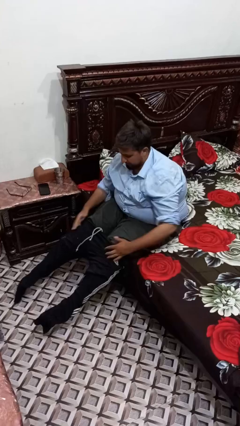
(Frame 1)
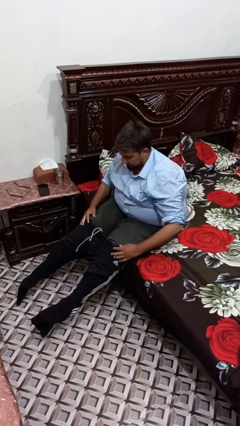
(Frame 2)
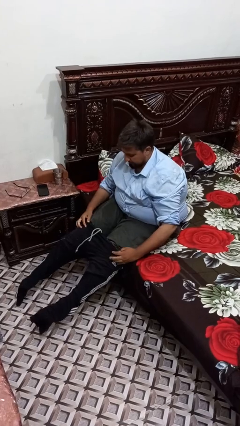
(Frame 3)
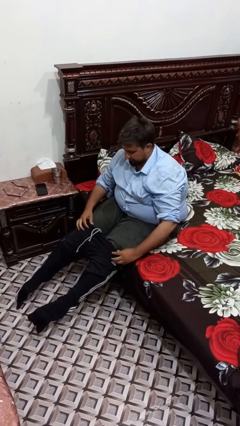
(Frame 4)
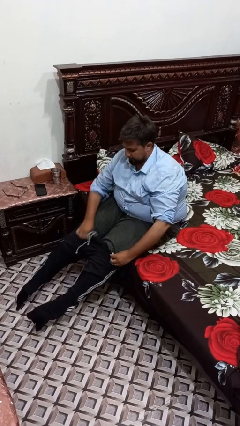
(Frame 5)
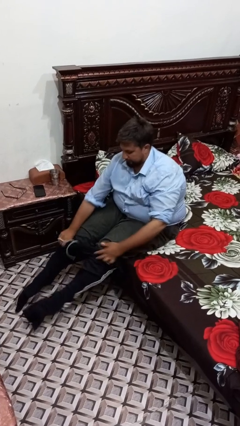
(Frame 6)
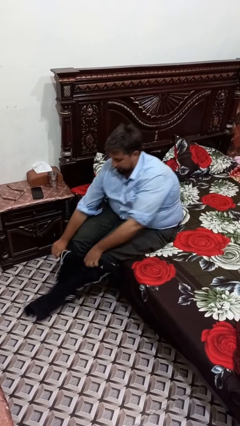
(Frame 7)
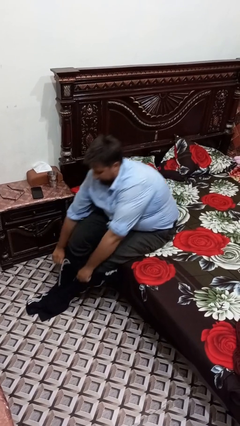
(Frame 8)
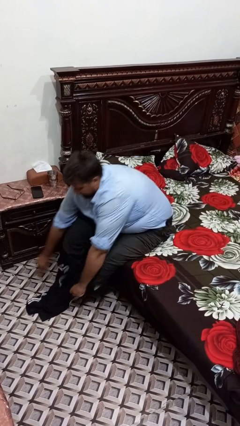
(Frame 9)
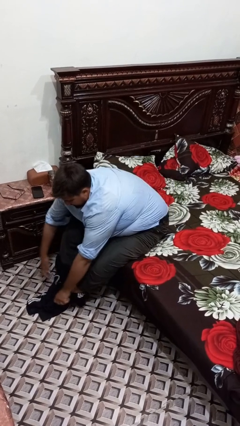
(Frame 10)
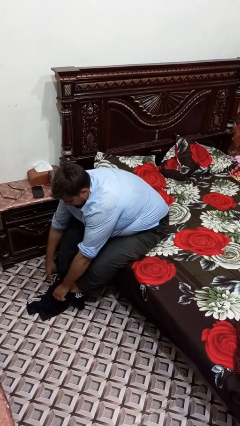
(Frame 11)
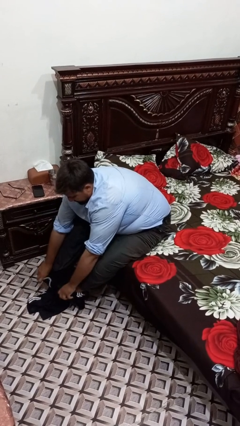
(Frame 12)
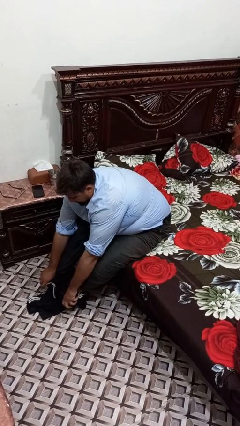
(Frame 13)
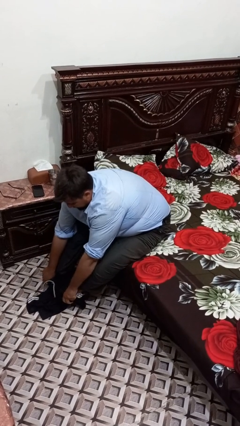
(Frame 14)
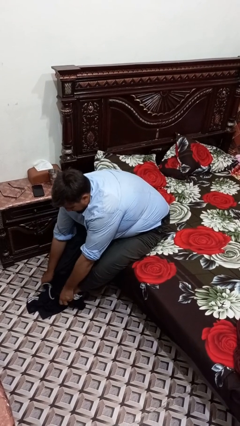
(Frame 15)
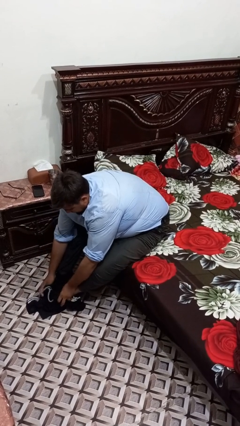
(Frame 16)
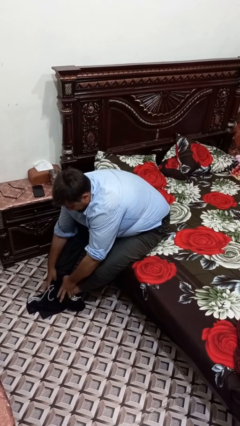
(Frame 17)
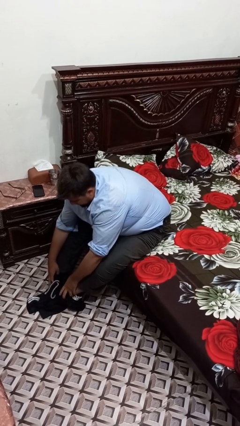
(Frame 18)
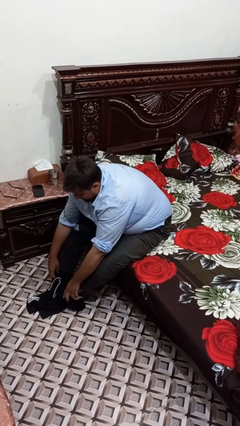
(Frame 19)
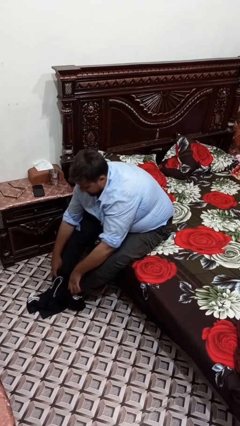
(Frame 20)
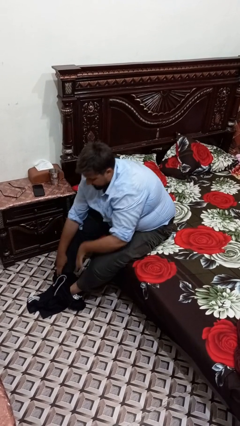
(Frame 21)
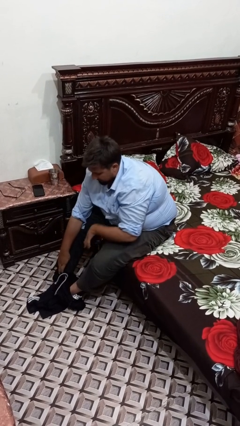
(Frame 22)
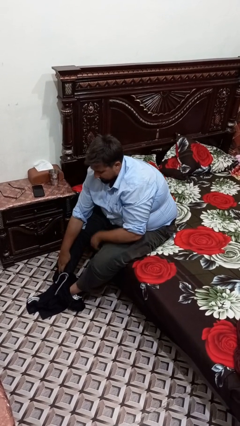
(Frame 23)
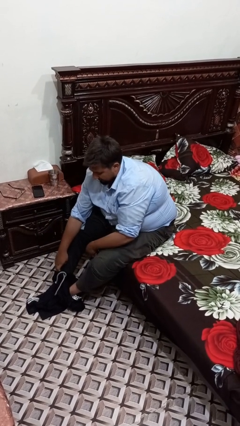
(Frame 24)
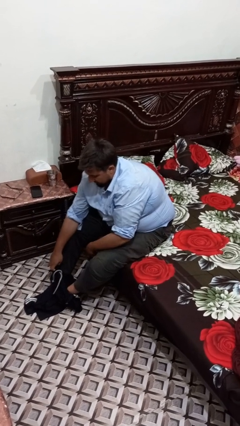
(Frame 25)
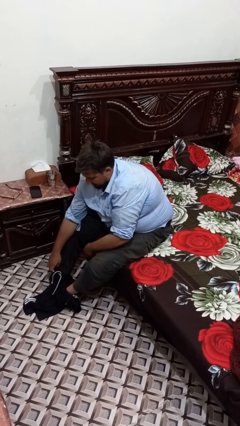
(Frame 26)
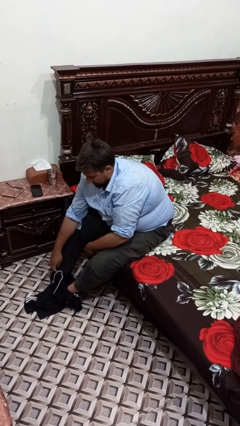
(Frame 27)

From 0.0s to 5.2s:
person takes off pants

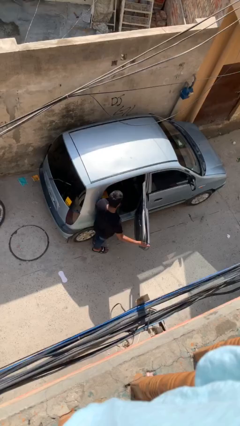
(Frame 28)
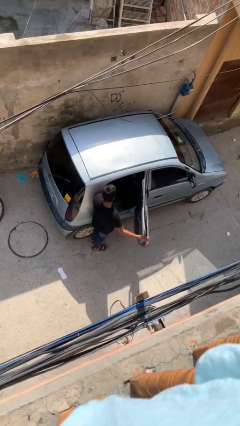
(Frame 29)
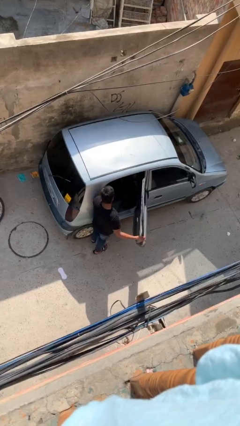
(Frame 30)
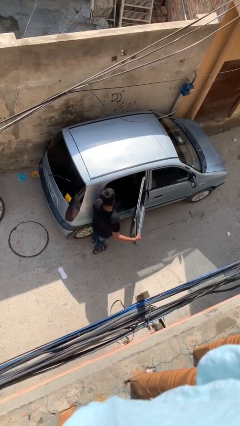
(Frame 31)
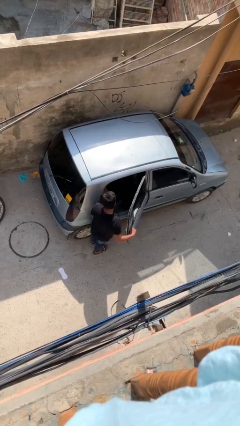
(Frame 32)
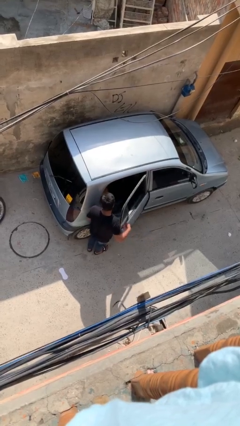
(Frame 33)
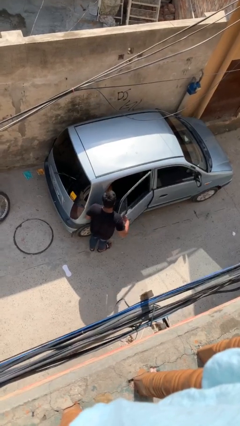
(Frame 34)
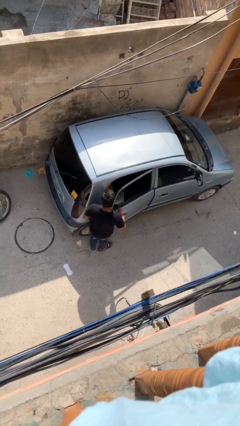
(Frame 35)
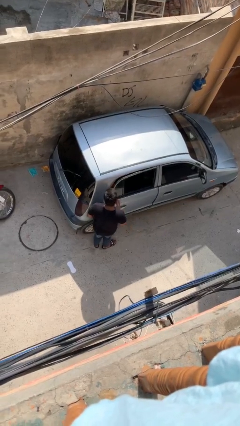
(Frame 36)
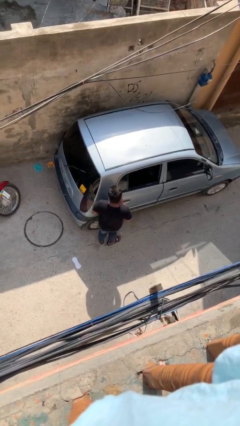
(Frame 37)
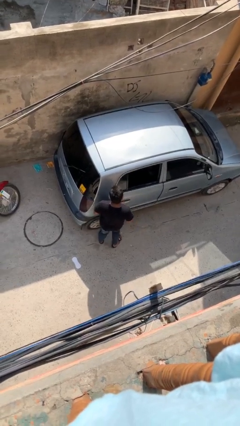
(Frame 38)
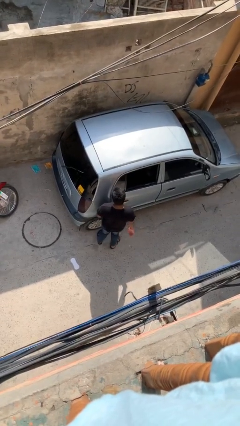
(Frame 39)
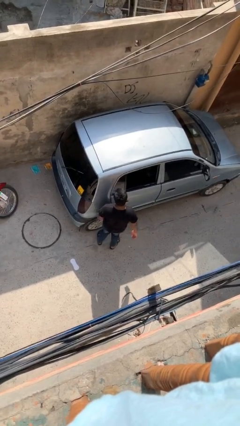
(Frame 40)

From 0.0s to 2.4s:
person closes car door

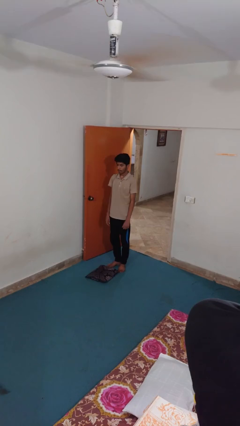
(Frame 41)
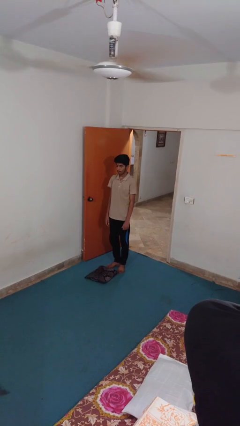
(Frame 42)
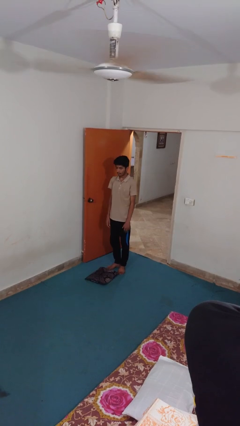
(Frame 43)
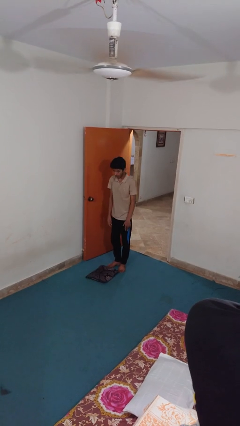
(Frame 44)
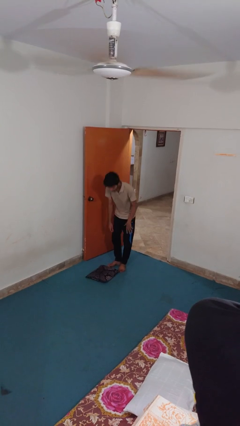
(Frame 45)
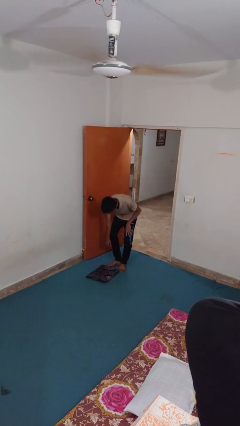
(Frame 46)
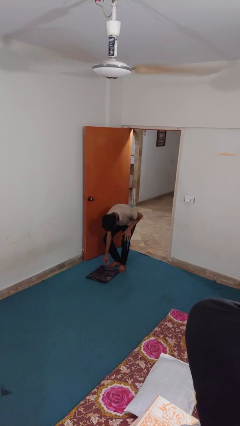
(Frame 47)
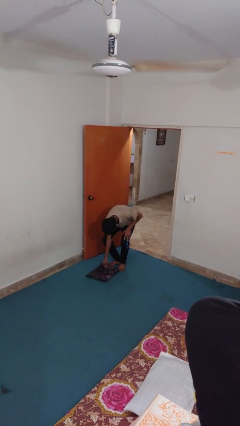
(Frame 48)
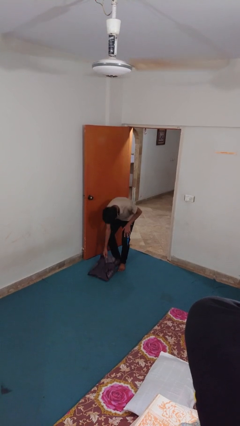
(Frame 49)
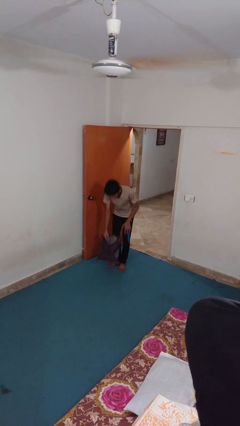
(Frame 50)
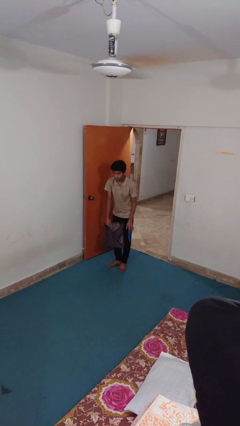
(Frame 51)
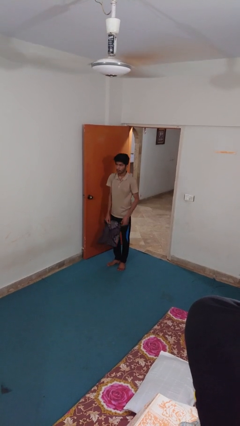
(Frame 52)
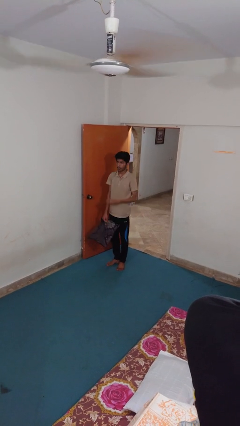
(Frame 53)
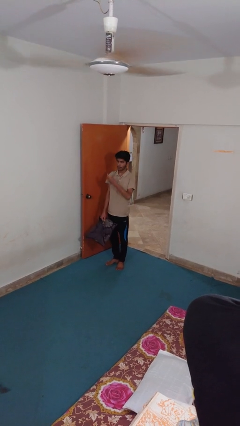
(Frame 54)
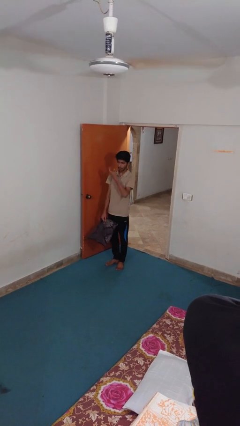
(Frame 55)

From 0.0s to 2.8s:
person picks up object from floor

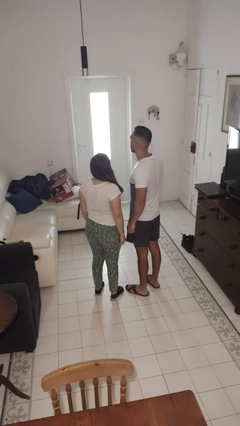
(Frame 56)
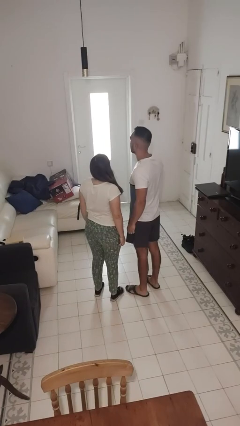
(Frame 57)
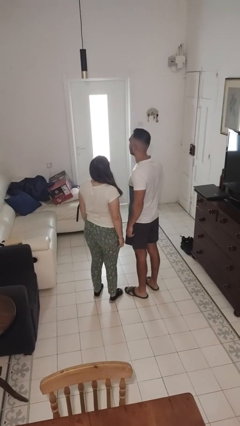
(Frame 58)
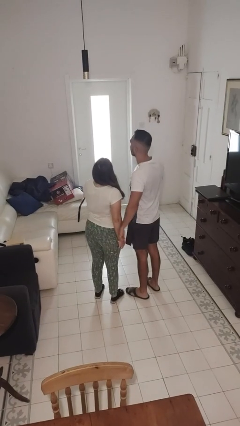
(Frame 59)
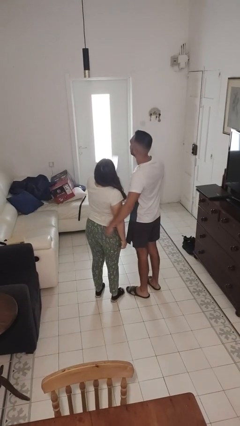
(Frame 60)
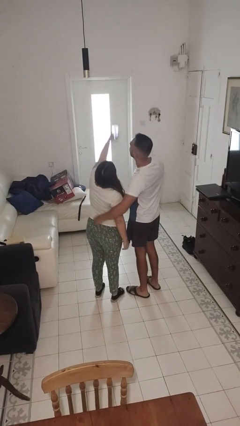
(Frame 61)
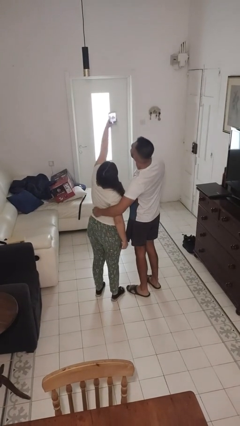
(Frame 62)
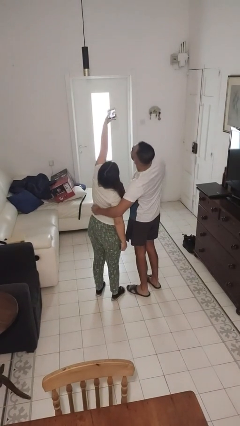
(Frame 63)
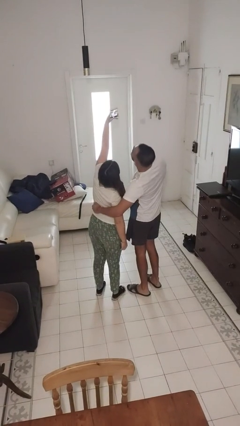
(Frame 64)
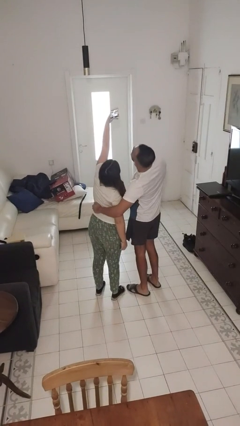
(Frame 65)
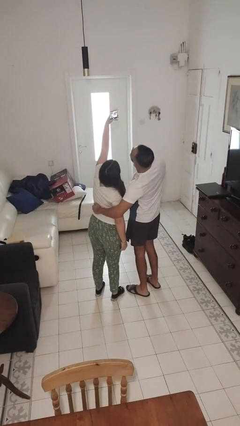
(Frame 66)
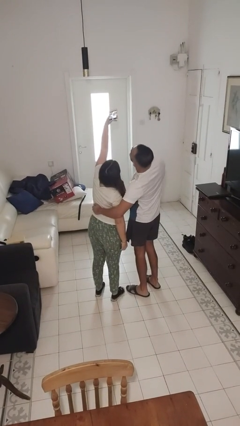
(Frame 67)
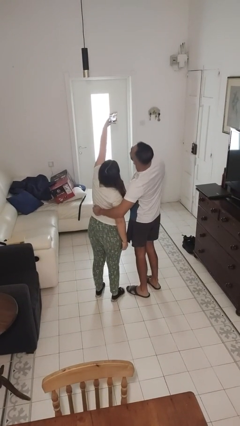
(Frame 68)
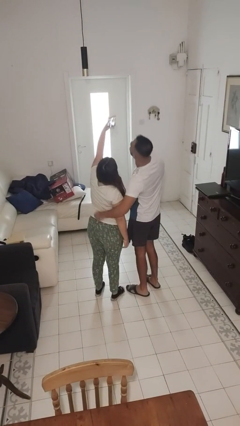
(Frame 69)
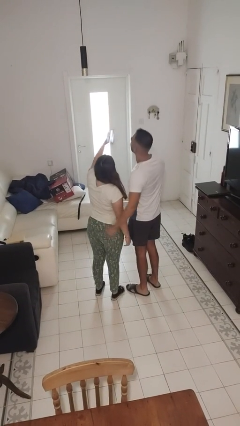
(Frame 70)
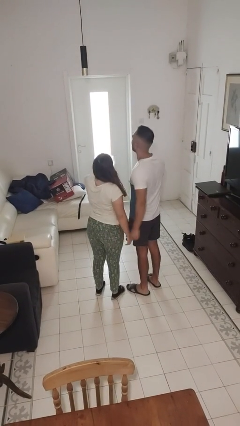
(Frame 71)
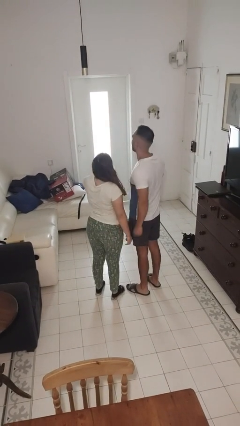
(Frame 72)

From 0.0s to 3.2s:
person takes selfie with person

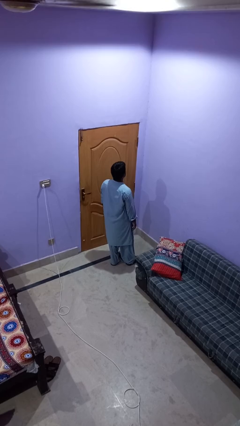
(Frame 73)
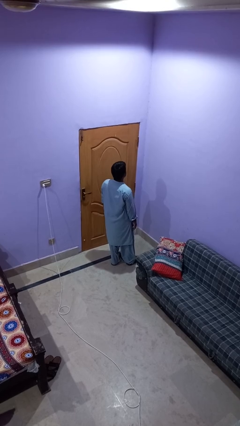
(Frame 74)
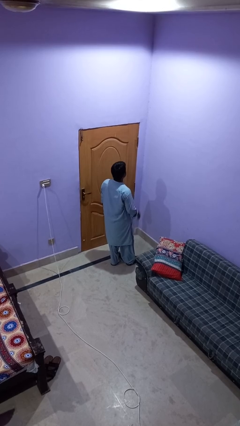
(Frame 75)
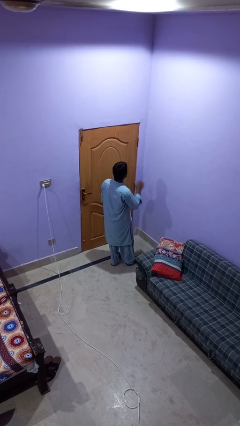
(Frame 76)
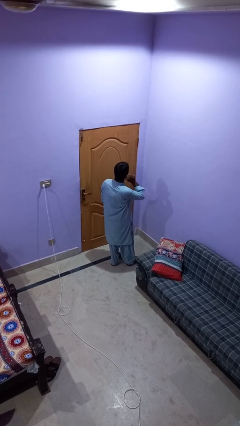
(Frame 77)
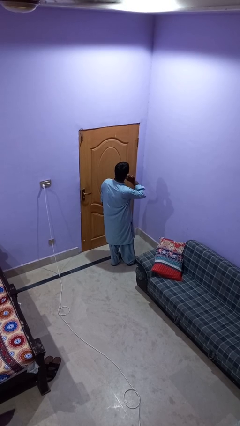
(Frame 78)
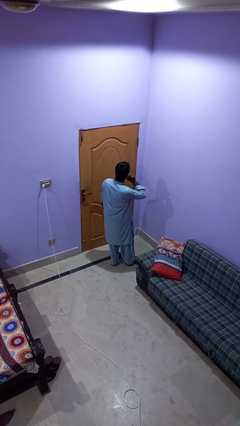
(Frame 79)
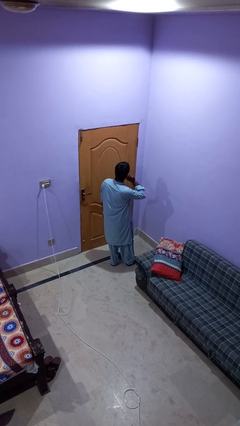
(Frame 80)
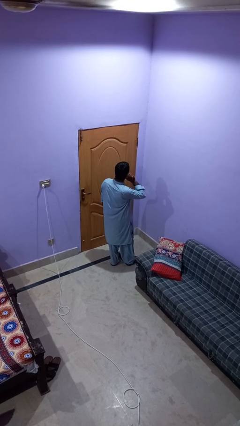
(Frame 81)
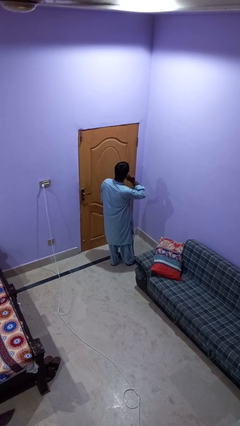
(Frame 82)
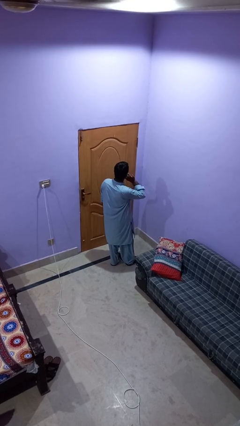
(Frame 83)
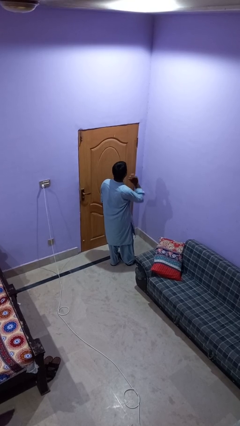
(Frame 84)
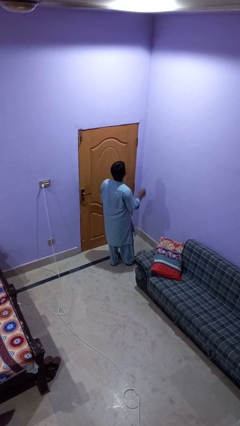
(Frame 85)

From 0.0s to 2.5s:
person gestures listen closely

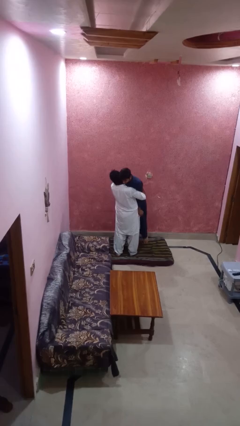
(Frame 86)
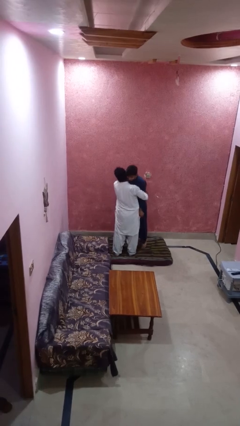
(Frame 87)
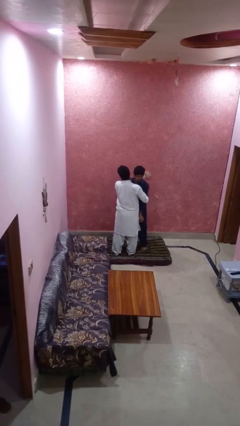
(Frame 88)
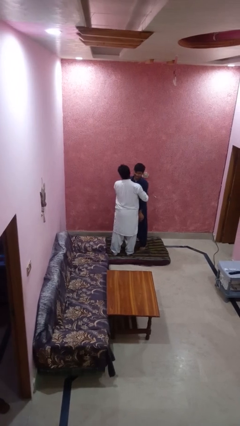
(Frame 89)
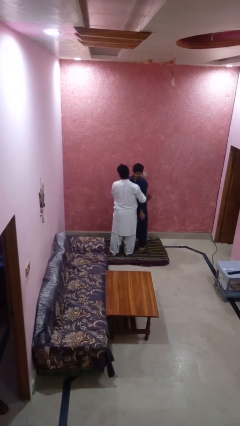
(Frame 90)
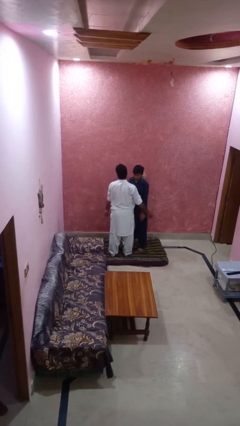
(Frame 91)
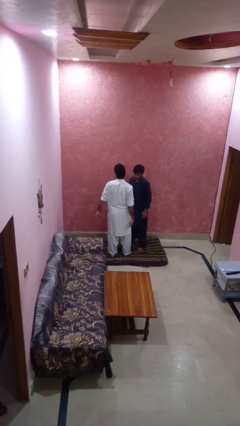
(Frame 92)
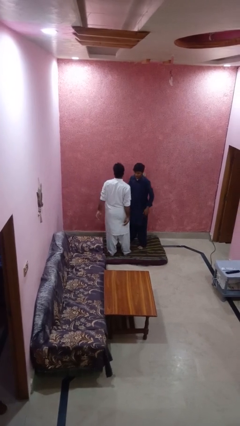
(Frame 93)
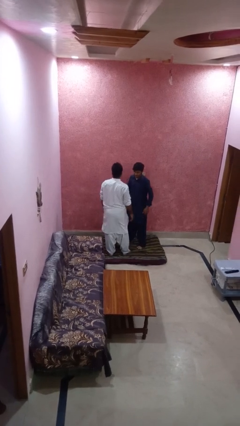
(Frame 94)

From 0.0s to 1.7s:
person puts down person
